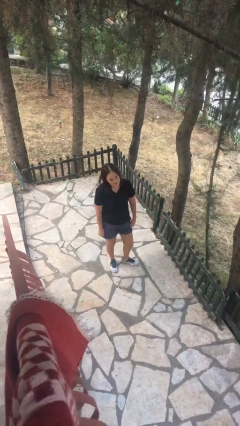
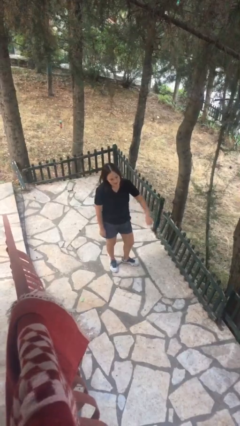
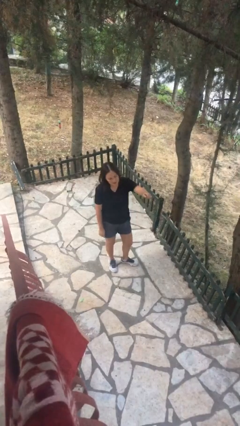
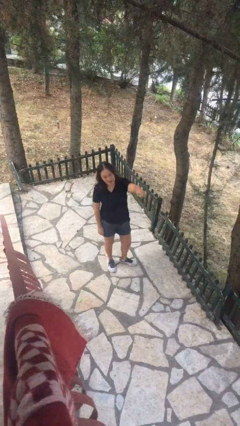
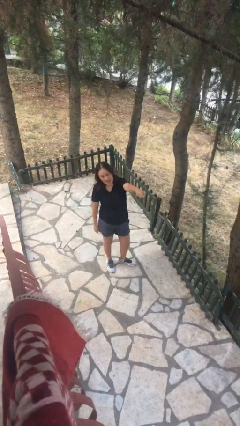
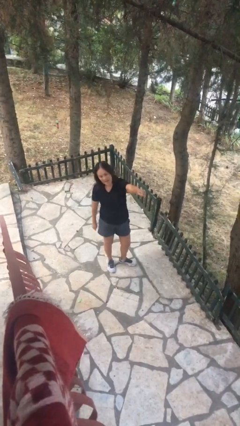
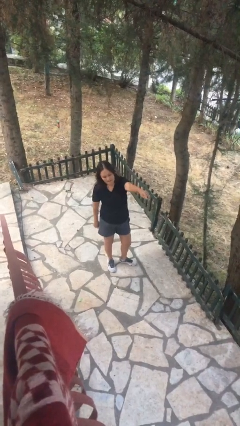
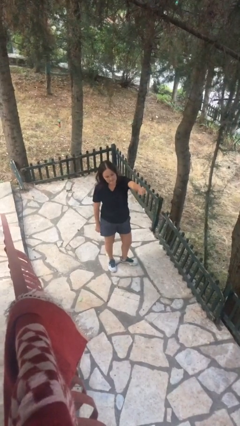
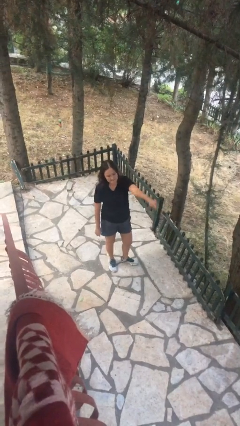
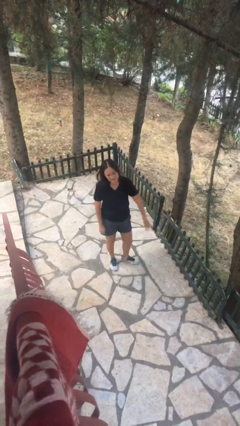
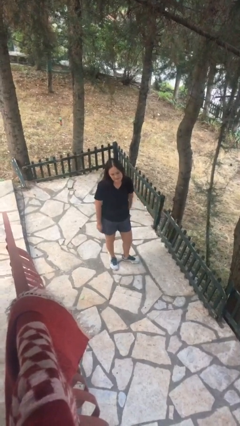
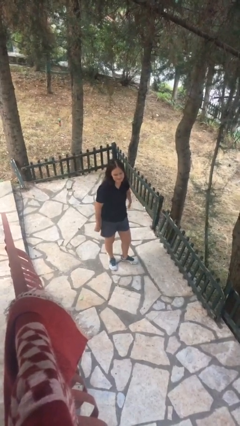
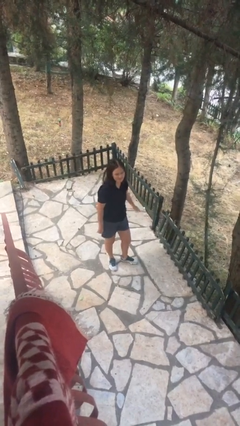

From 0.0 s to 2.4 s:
person points at person

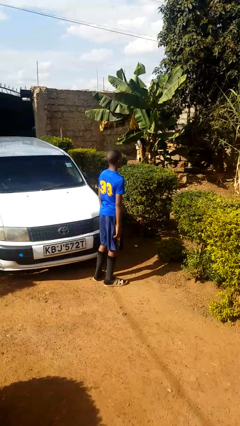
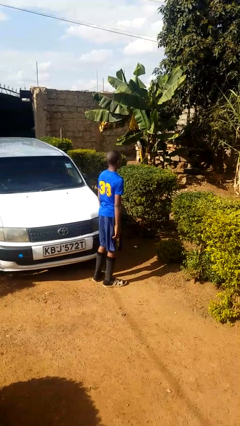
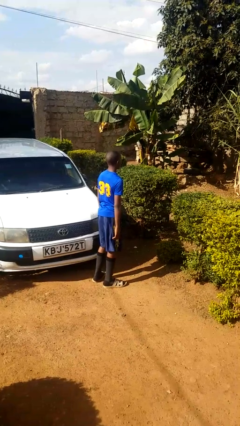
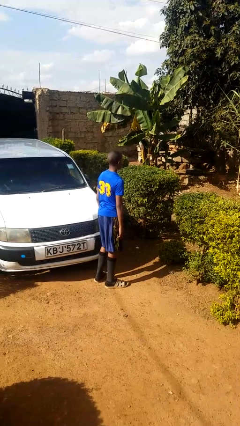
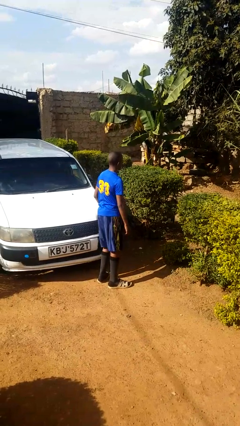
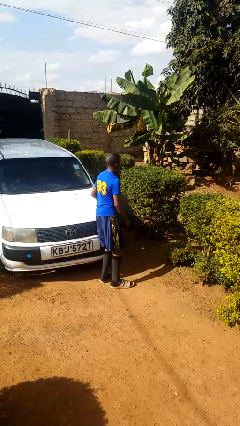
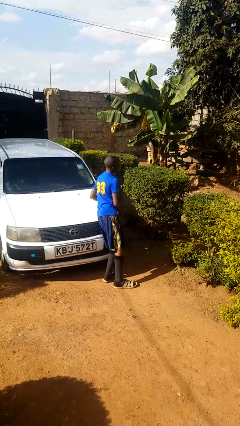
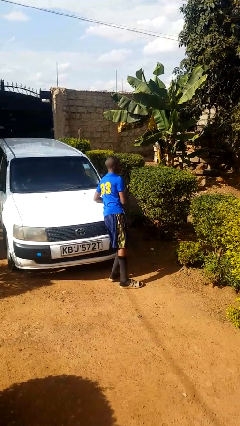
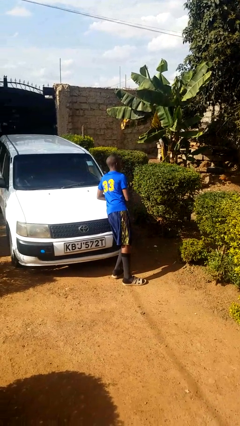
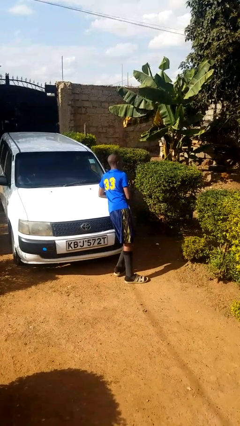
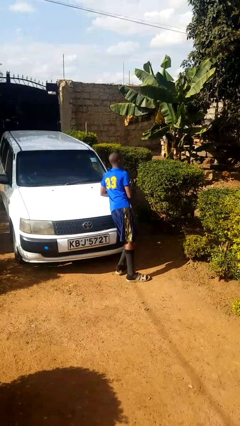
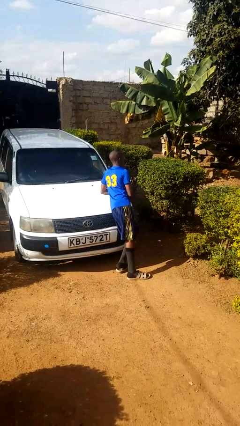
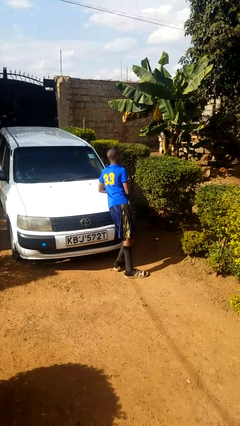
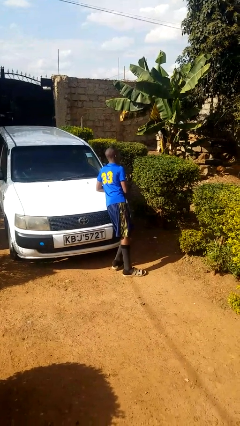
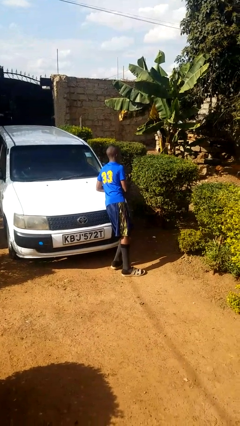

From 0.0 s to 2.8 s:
person leans against car

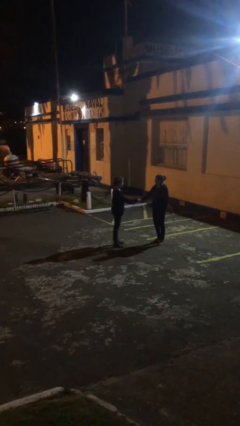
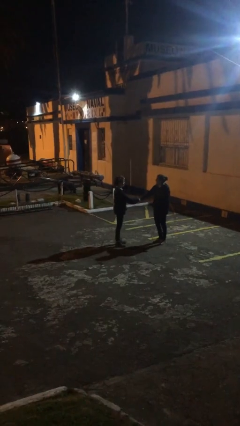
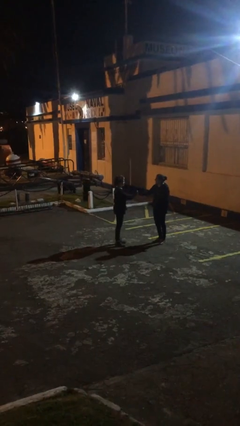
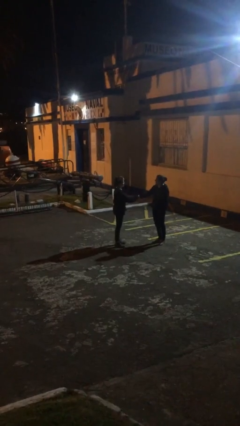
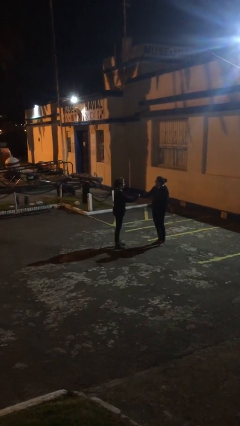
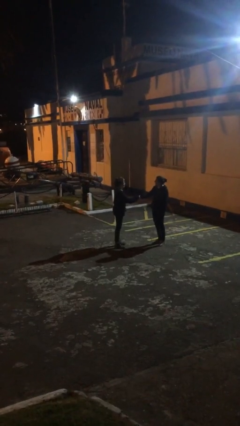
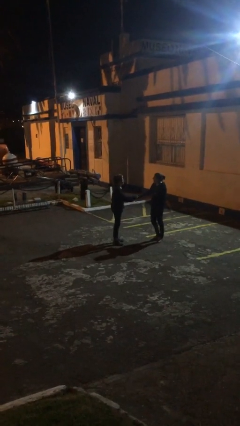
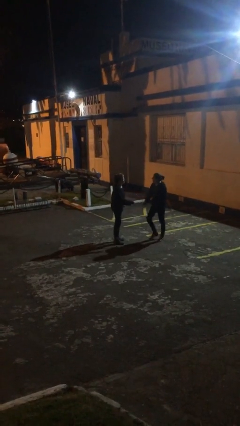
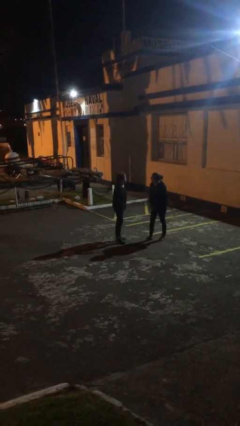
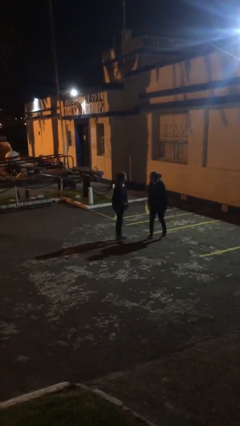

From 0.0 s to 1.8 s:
person shakes hand

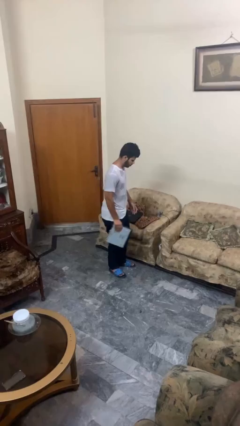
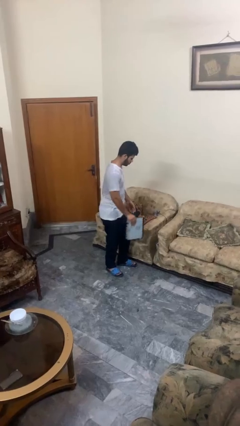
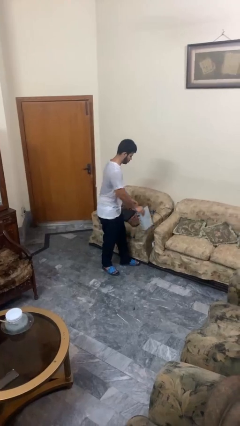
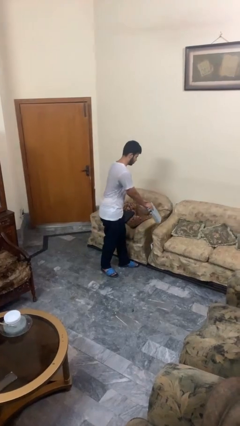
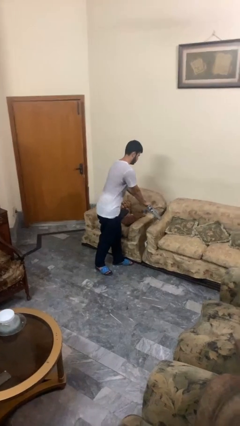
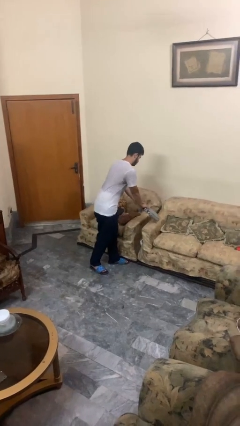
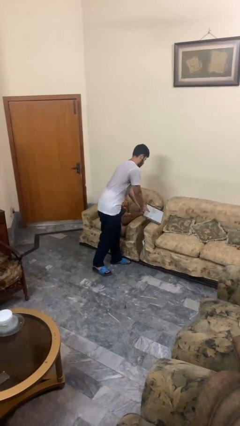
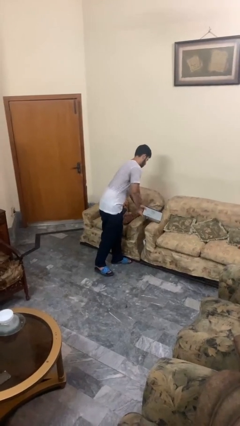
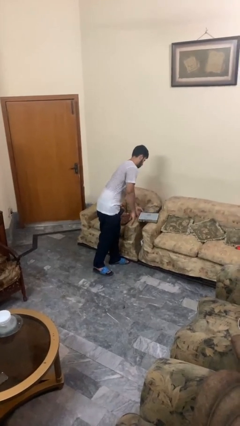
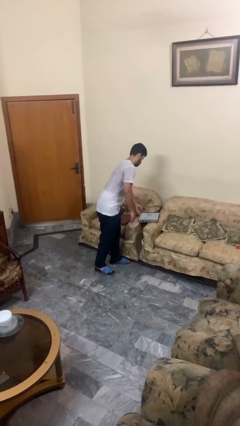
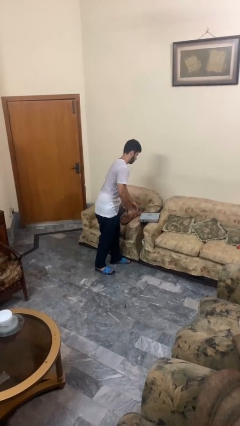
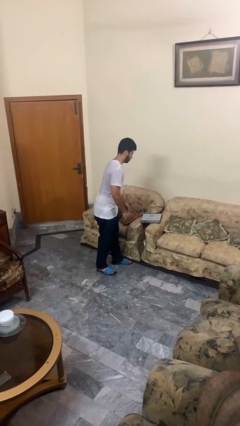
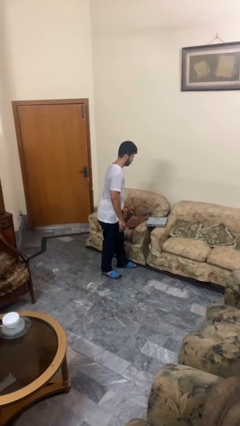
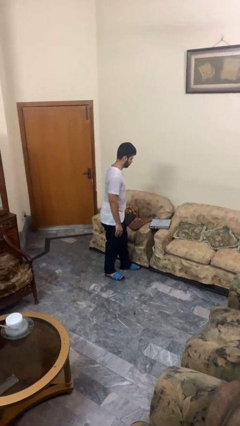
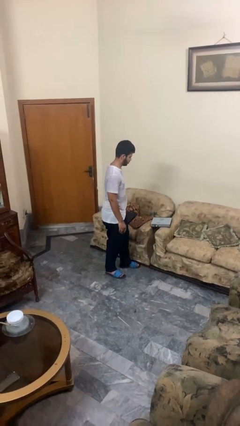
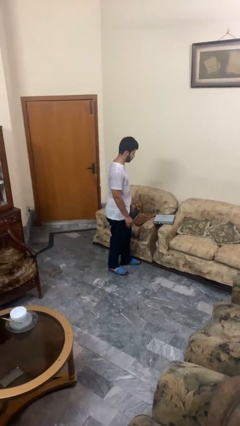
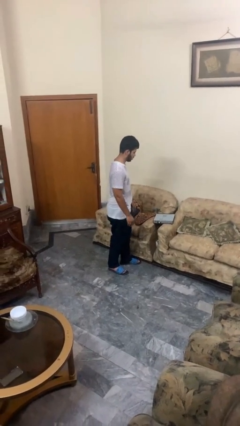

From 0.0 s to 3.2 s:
person puts down object on couch

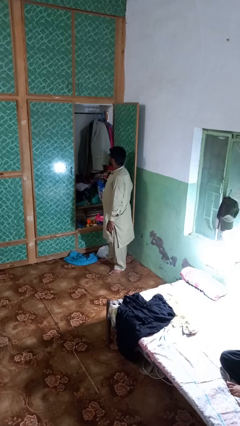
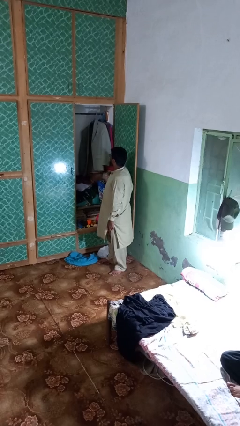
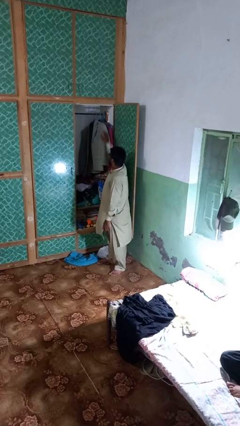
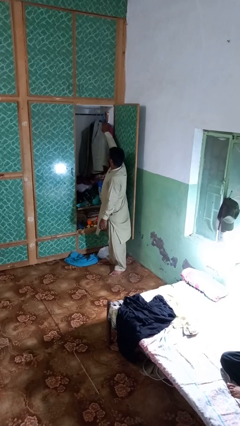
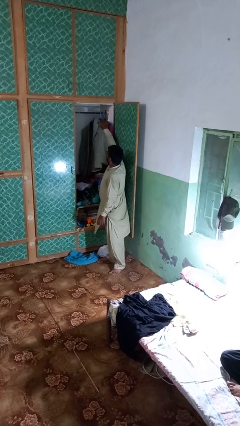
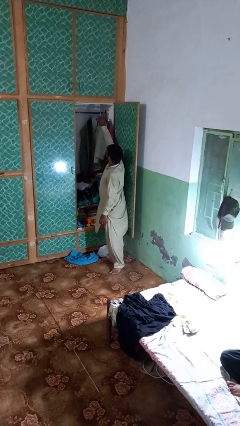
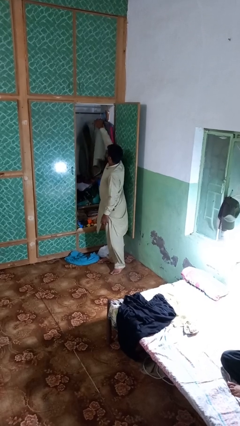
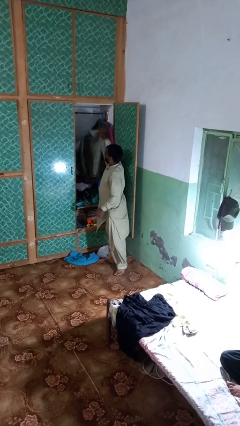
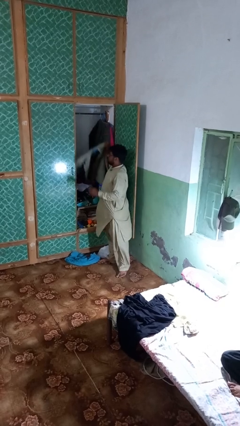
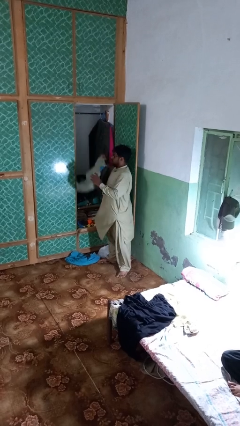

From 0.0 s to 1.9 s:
person takes clothes from closet

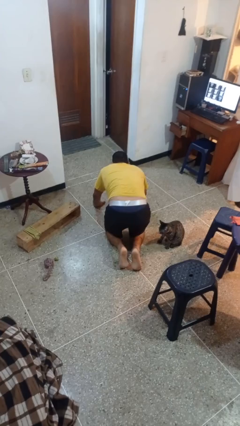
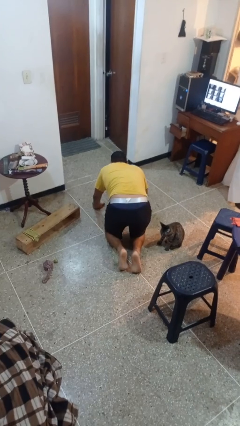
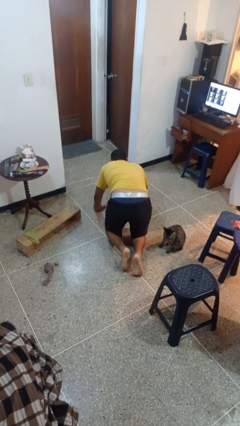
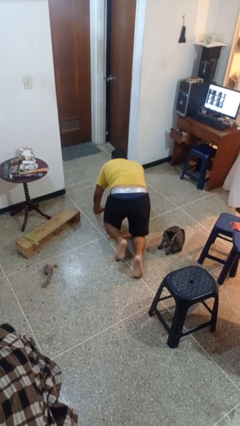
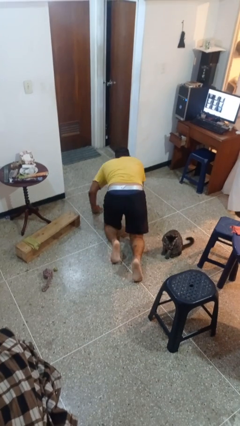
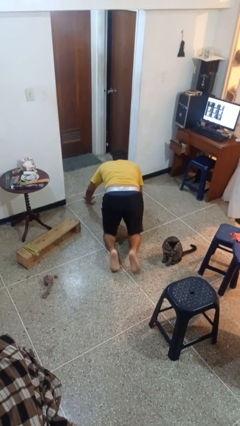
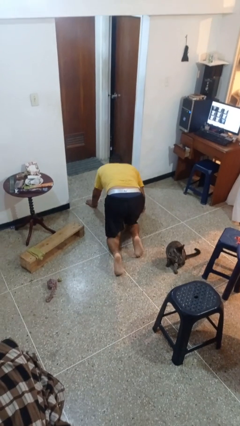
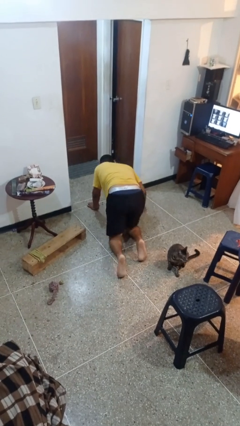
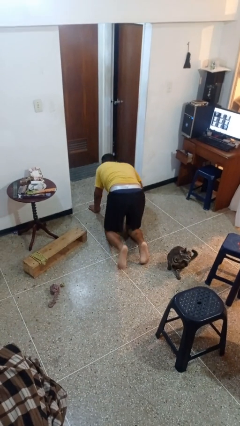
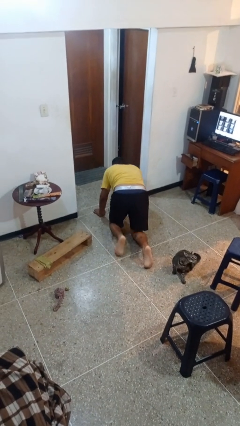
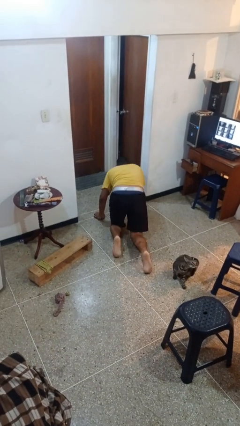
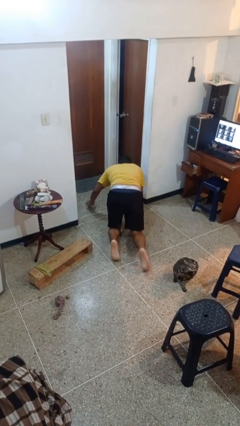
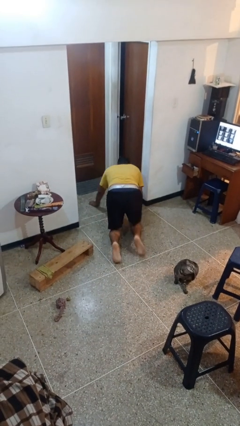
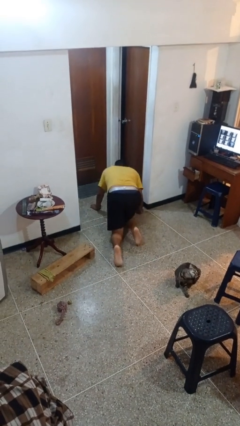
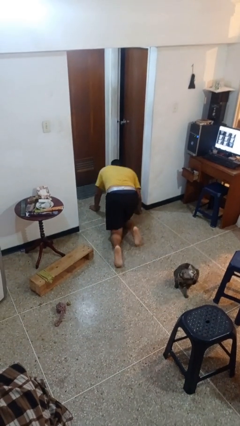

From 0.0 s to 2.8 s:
person crawls

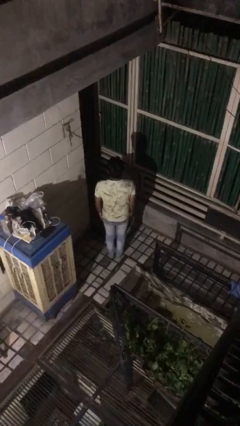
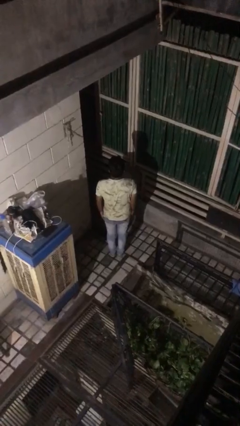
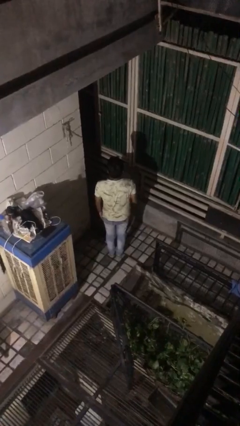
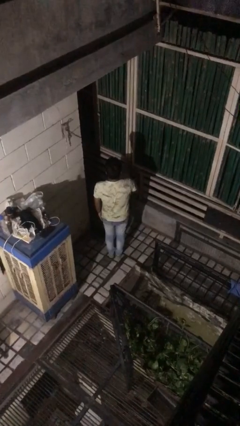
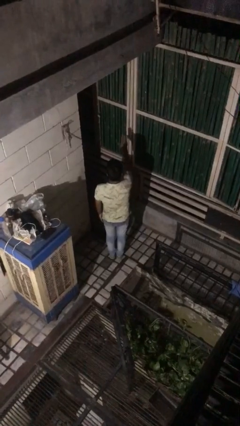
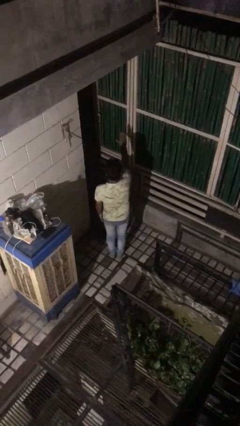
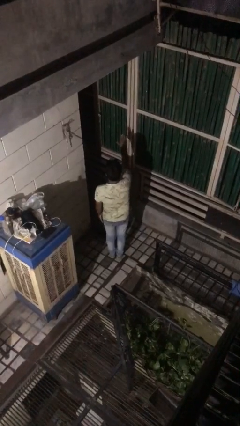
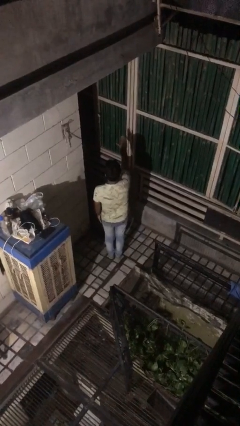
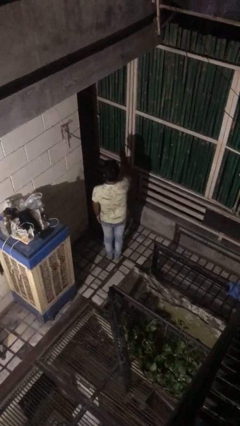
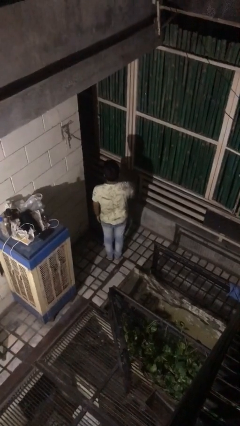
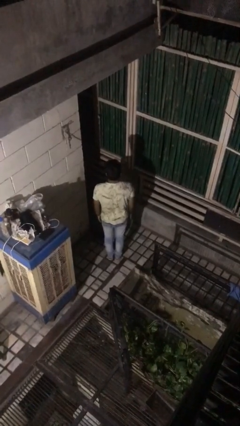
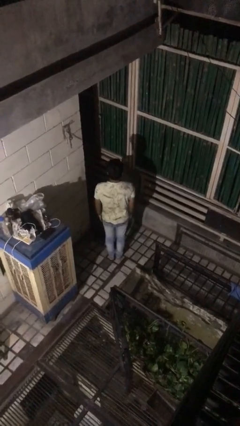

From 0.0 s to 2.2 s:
person gestures stop
